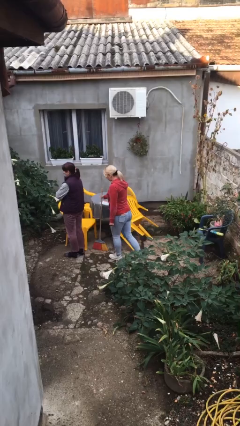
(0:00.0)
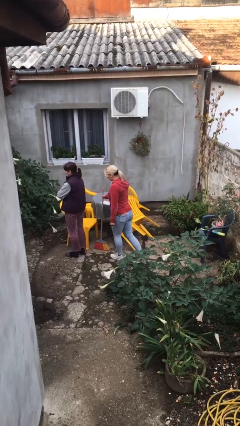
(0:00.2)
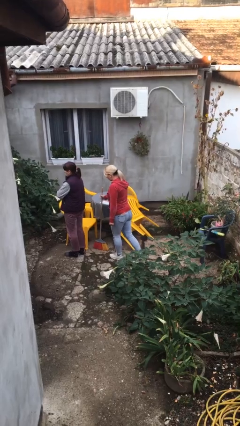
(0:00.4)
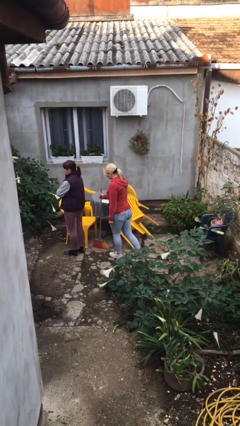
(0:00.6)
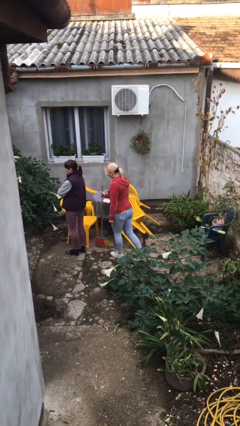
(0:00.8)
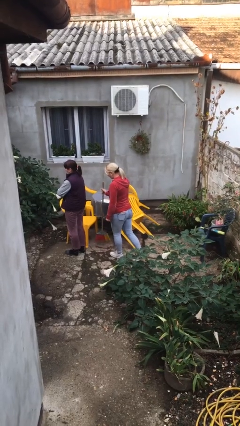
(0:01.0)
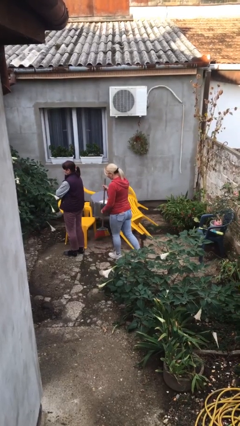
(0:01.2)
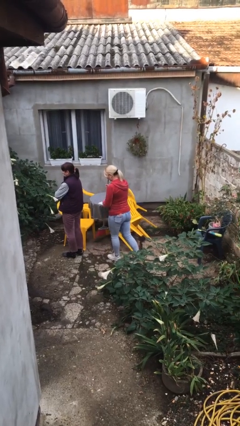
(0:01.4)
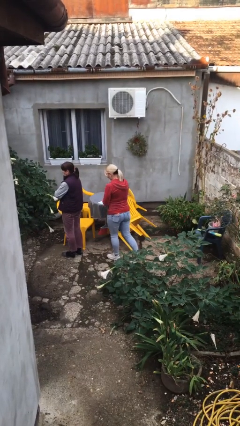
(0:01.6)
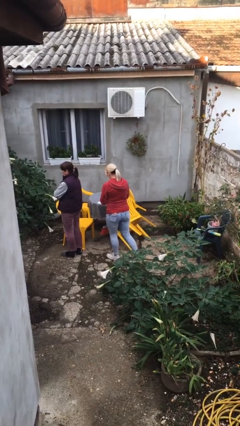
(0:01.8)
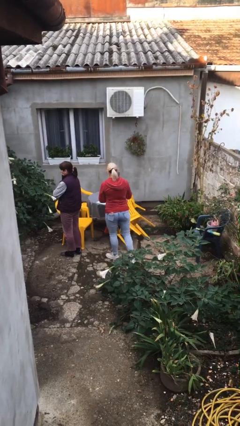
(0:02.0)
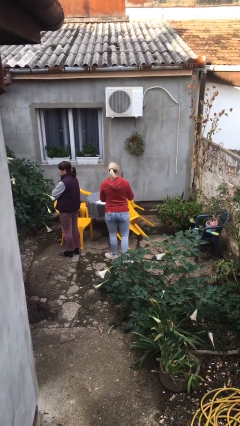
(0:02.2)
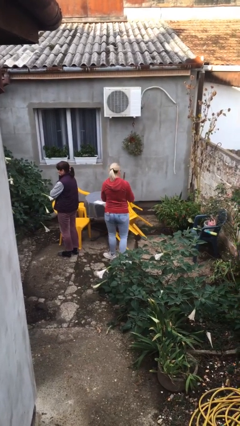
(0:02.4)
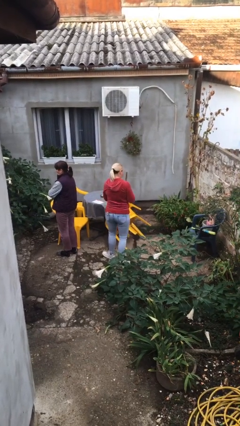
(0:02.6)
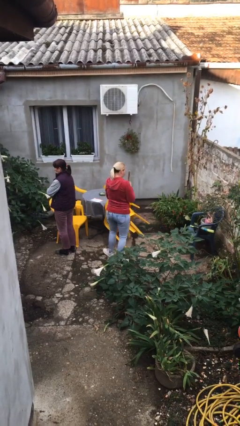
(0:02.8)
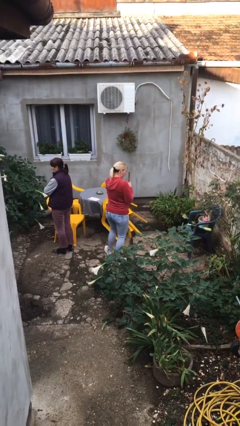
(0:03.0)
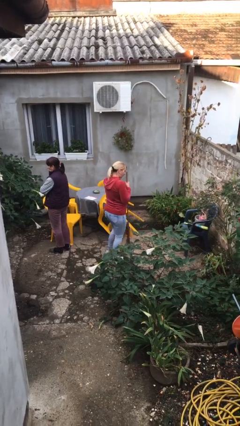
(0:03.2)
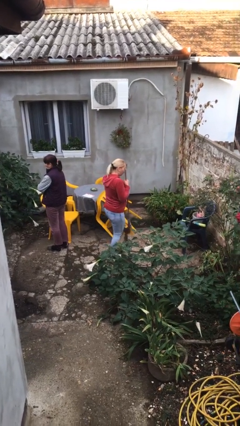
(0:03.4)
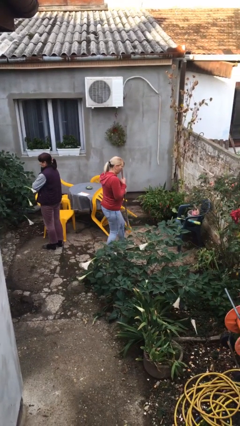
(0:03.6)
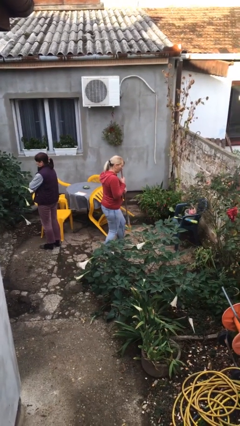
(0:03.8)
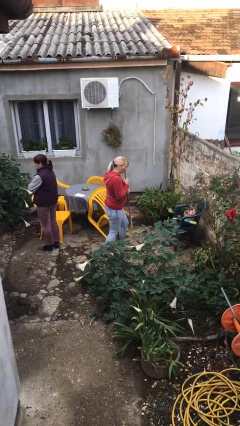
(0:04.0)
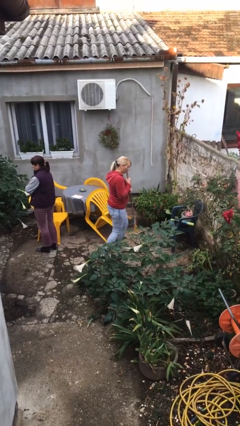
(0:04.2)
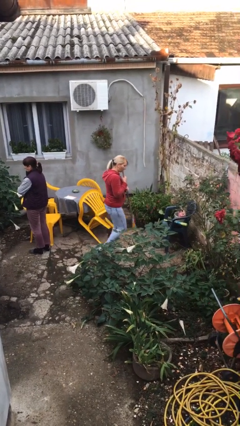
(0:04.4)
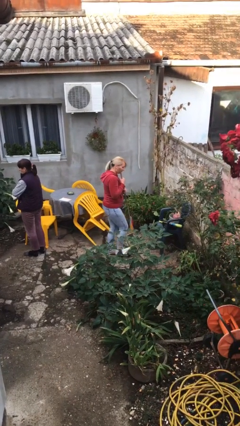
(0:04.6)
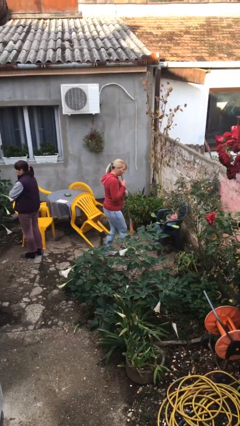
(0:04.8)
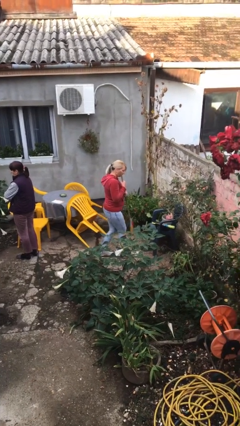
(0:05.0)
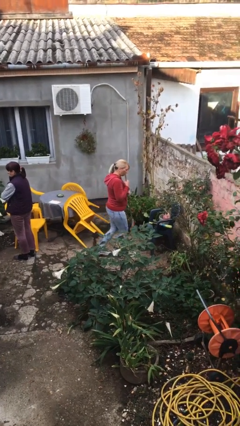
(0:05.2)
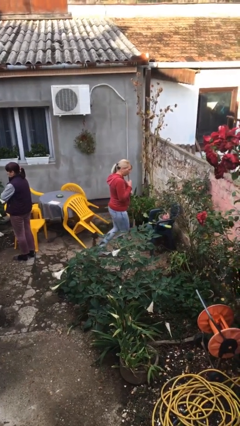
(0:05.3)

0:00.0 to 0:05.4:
person steals object from person

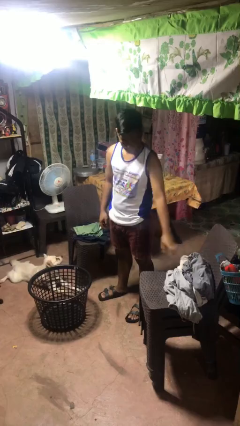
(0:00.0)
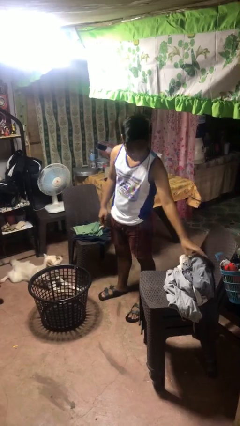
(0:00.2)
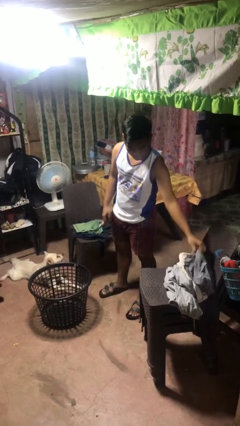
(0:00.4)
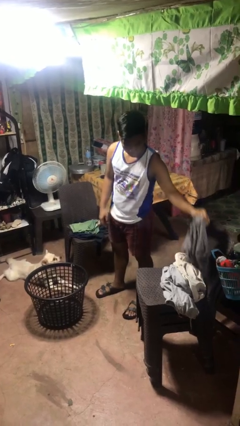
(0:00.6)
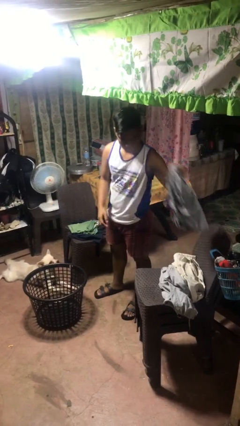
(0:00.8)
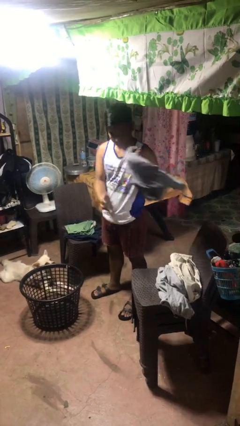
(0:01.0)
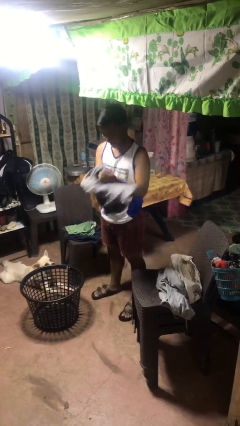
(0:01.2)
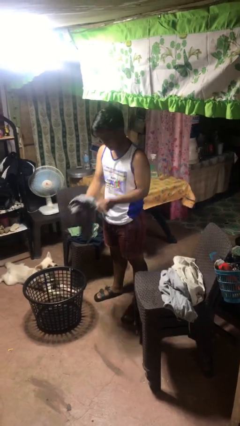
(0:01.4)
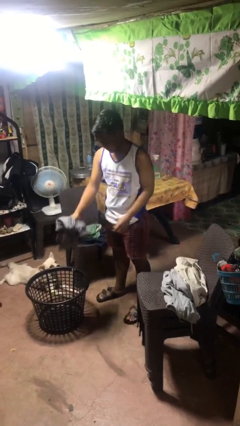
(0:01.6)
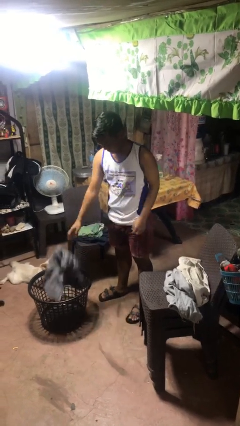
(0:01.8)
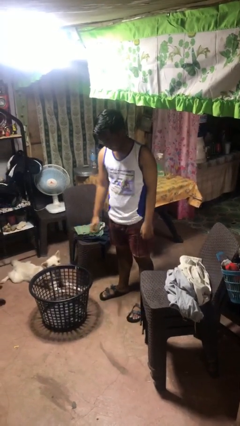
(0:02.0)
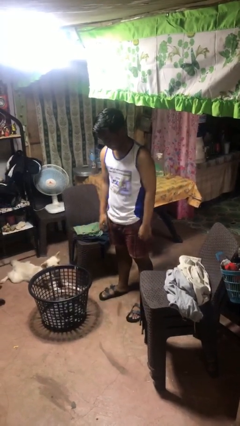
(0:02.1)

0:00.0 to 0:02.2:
person puts object into basket

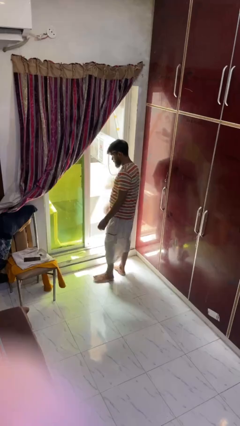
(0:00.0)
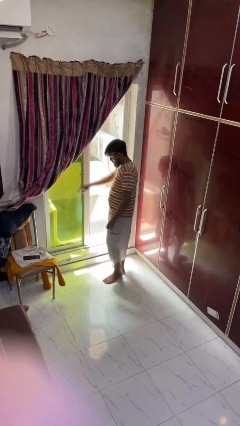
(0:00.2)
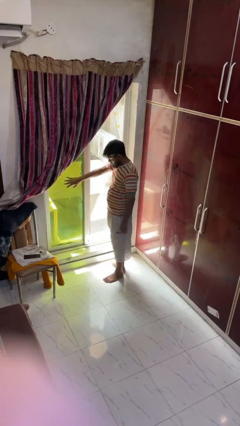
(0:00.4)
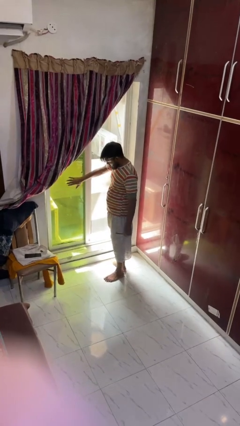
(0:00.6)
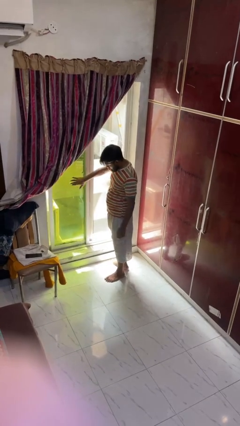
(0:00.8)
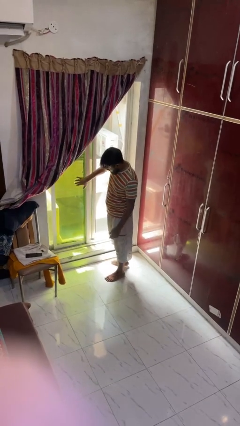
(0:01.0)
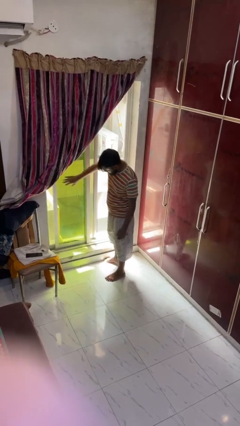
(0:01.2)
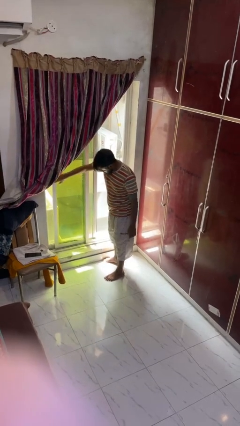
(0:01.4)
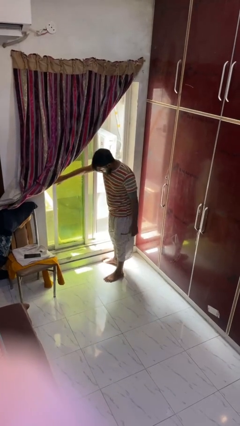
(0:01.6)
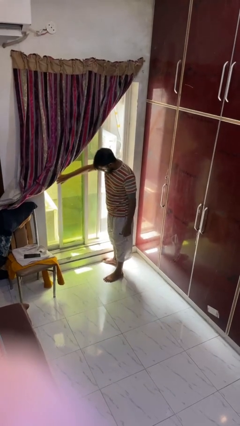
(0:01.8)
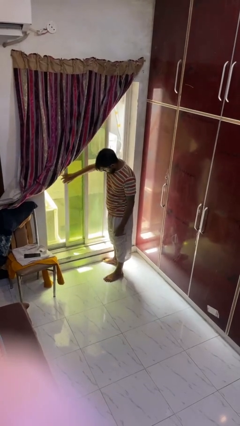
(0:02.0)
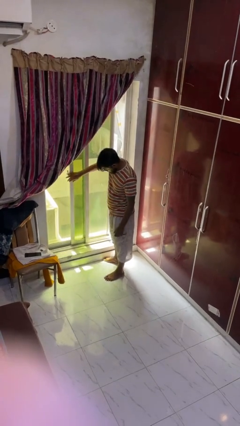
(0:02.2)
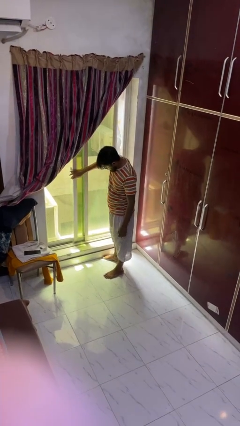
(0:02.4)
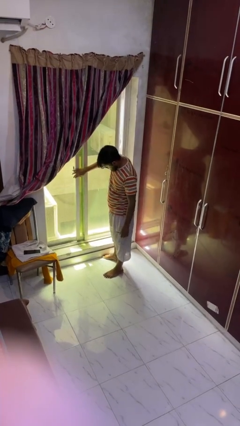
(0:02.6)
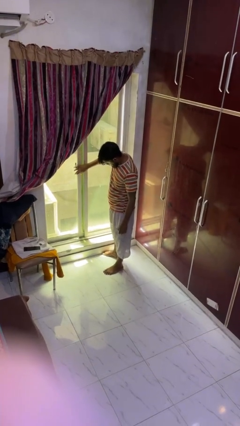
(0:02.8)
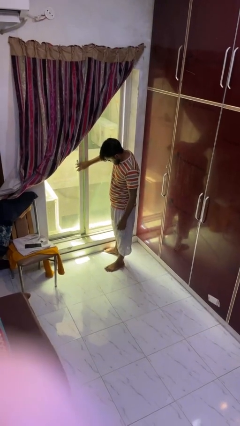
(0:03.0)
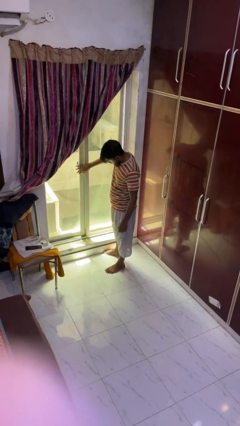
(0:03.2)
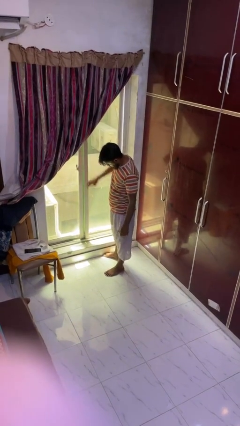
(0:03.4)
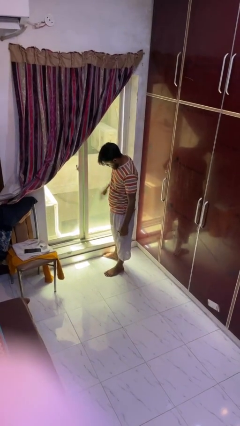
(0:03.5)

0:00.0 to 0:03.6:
person closes home window

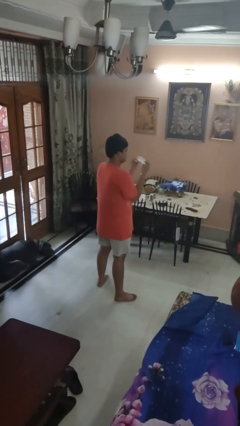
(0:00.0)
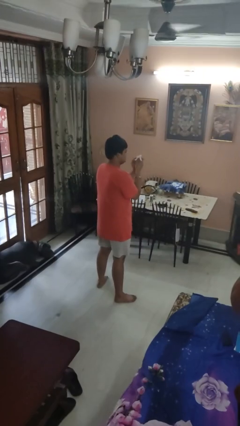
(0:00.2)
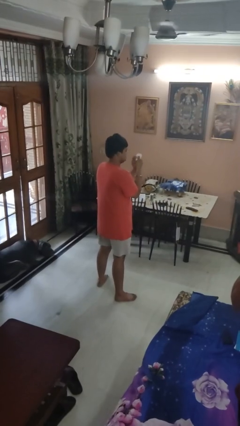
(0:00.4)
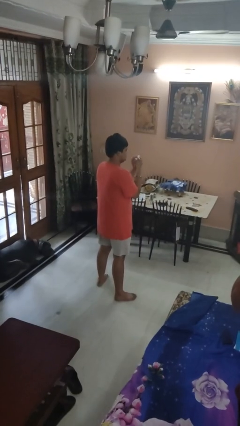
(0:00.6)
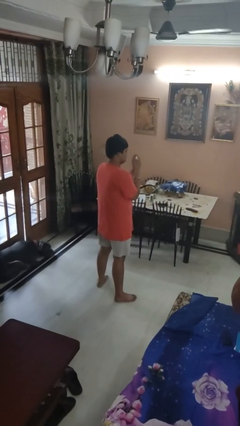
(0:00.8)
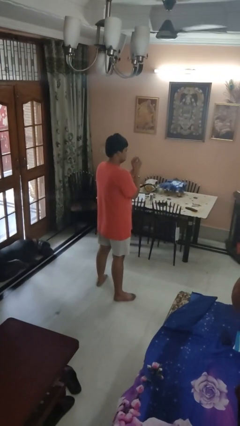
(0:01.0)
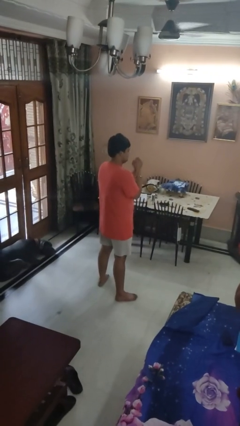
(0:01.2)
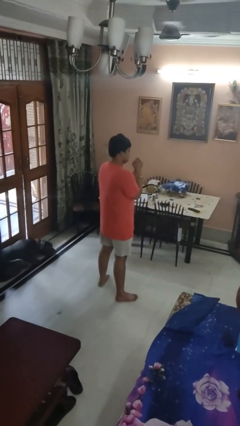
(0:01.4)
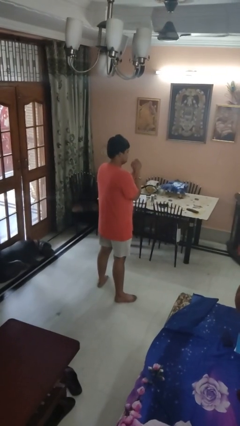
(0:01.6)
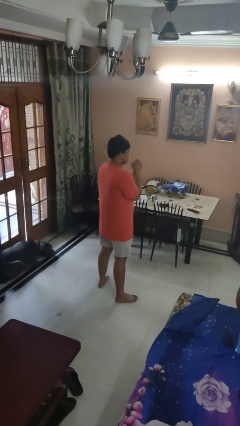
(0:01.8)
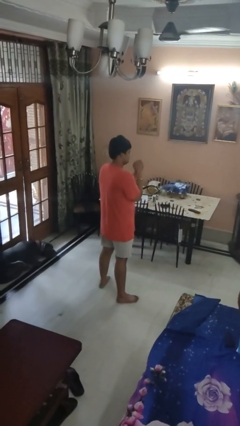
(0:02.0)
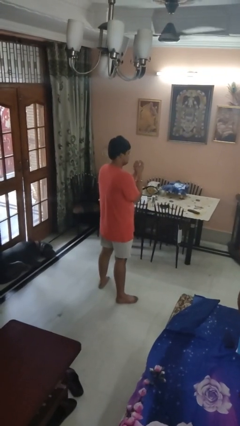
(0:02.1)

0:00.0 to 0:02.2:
person crumples paper

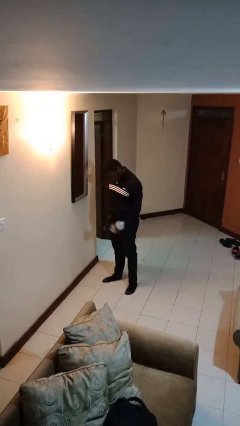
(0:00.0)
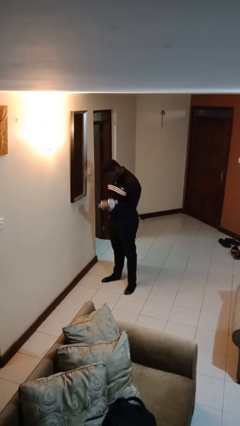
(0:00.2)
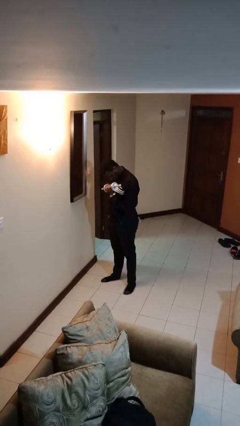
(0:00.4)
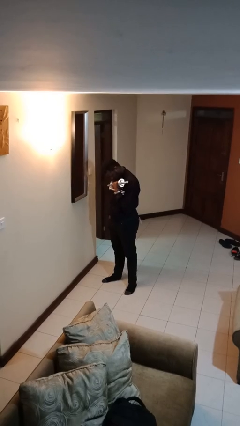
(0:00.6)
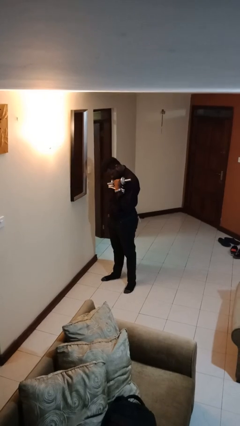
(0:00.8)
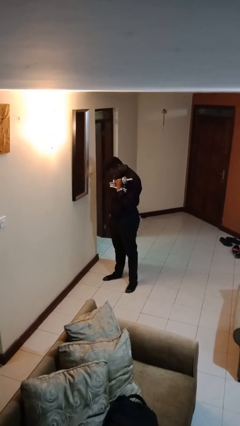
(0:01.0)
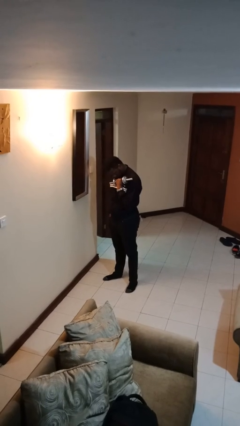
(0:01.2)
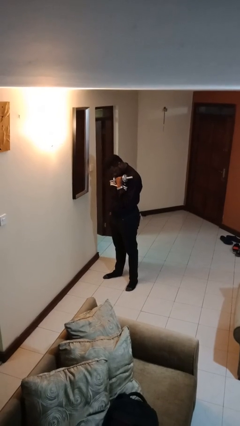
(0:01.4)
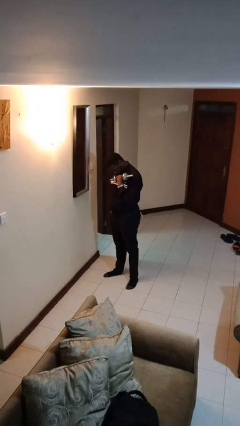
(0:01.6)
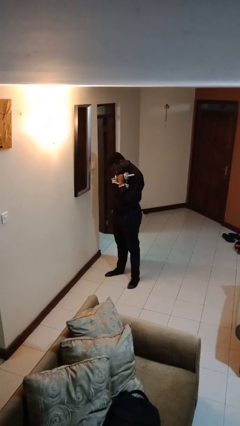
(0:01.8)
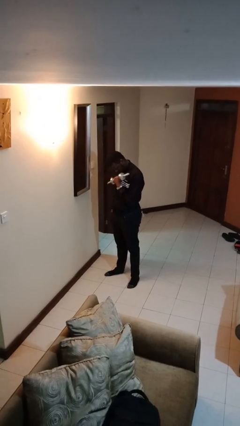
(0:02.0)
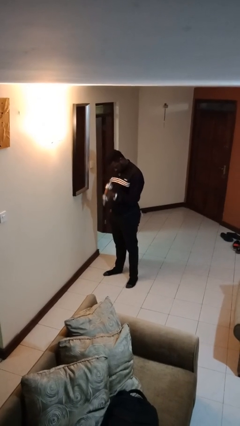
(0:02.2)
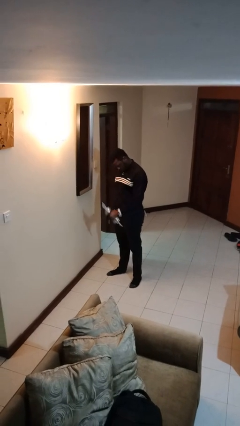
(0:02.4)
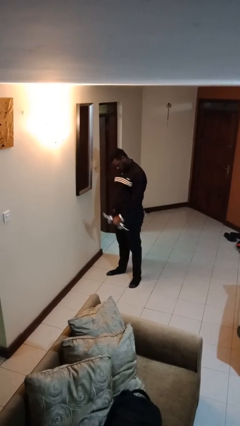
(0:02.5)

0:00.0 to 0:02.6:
person lifts dumbbells

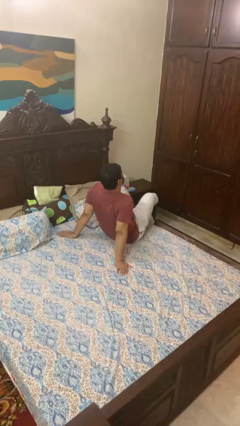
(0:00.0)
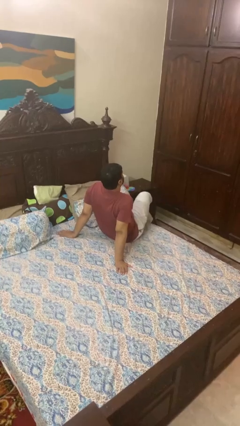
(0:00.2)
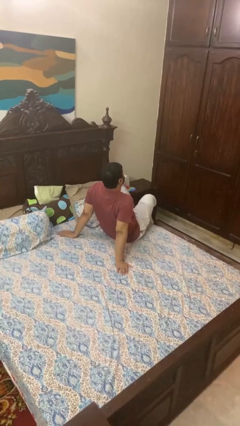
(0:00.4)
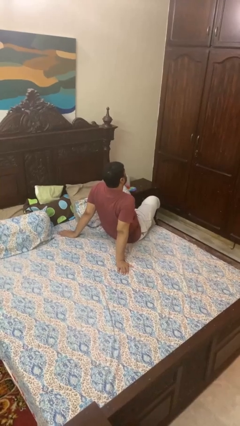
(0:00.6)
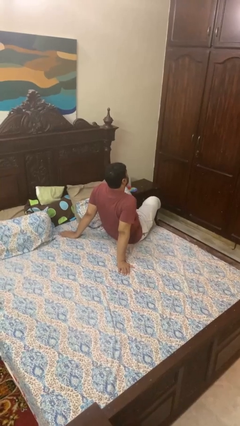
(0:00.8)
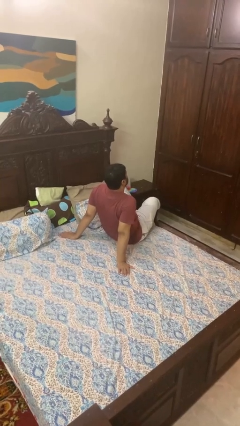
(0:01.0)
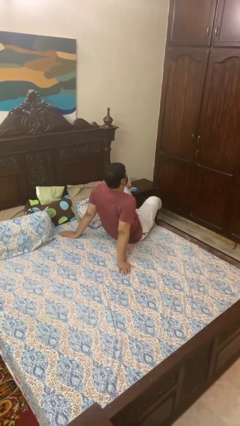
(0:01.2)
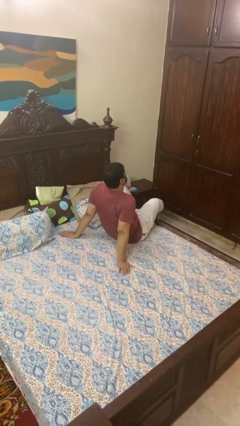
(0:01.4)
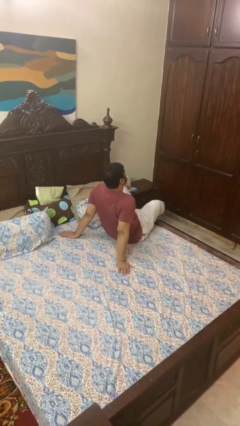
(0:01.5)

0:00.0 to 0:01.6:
person crosses legs
